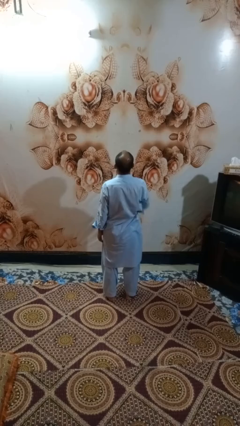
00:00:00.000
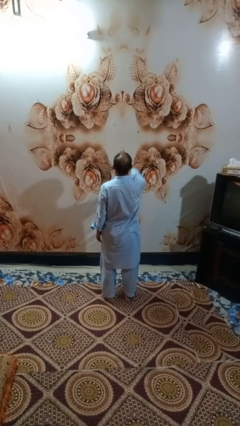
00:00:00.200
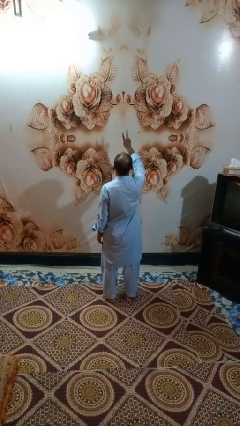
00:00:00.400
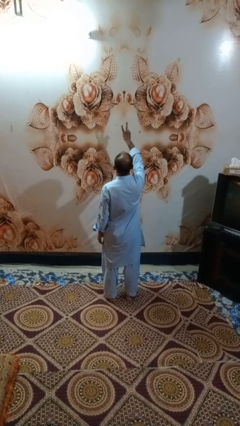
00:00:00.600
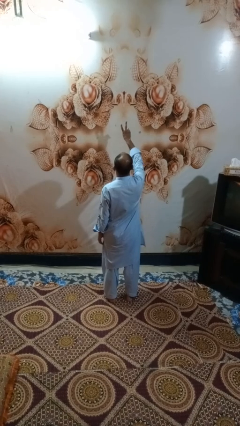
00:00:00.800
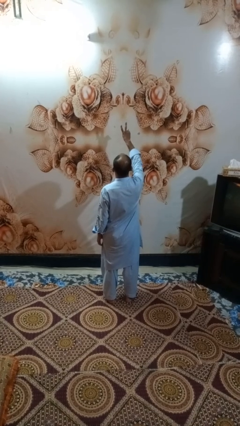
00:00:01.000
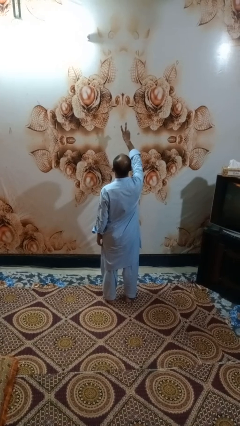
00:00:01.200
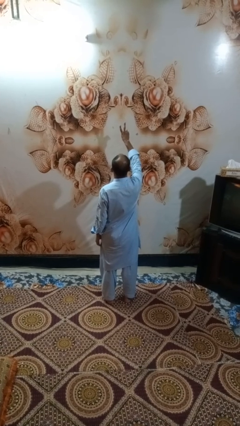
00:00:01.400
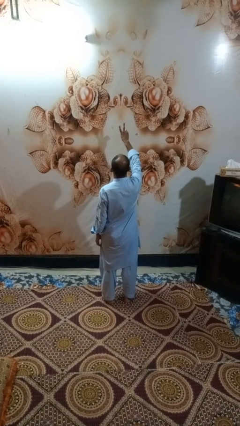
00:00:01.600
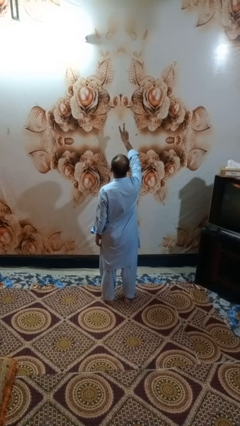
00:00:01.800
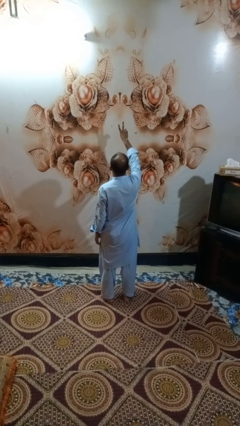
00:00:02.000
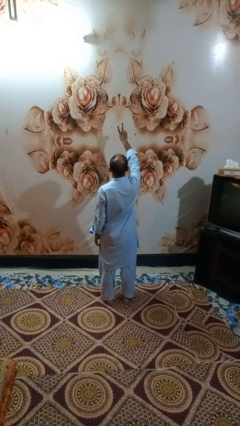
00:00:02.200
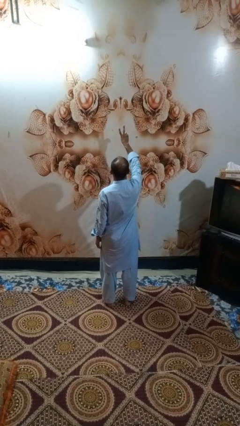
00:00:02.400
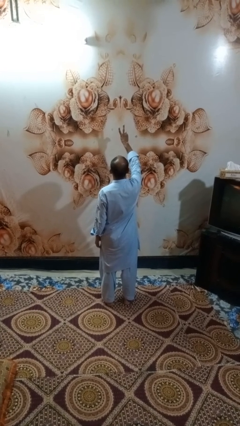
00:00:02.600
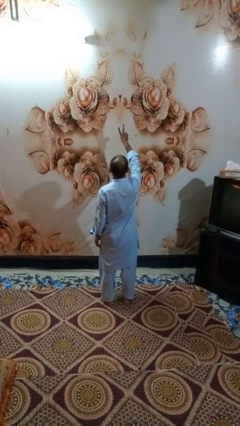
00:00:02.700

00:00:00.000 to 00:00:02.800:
person gestures peace

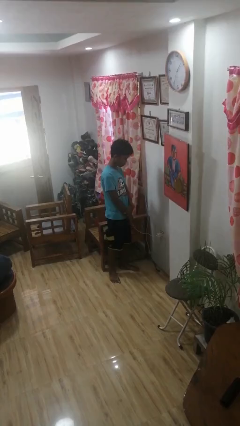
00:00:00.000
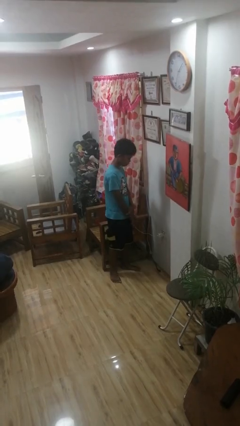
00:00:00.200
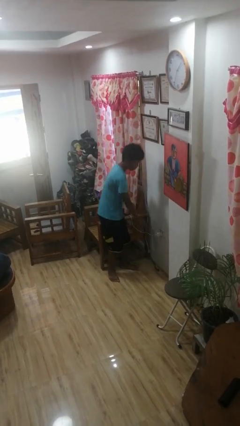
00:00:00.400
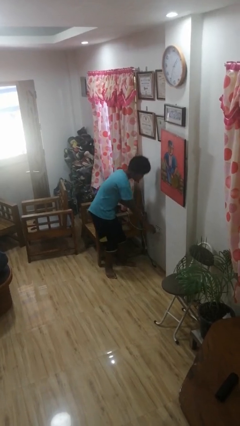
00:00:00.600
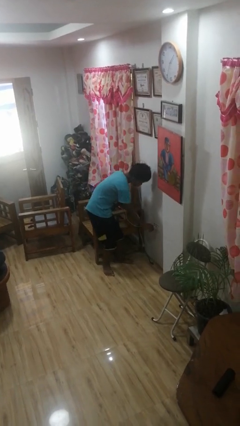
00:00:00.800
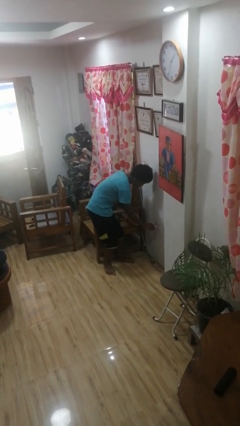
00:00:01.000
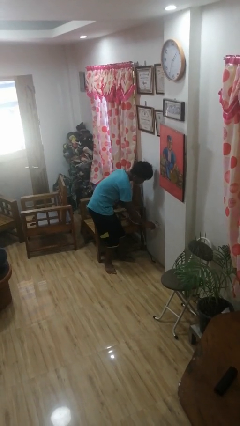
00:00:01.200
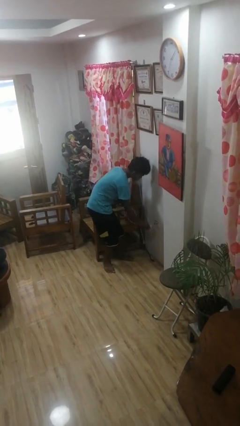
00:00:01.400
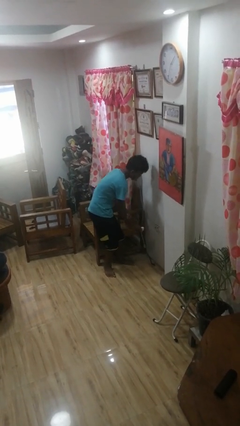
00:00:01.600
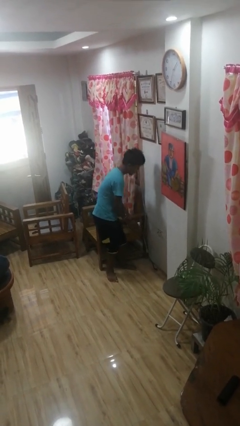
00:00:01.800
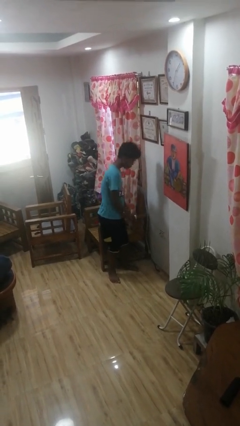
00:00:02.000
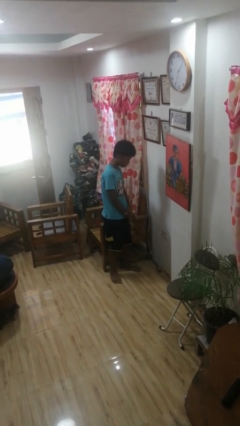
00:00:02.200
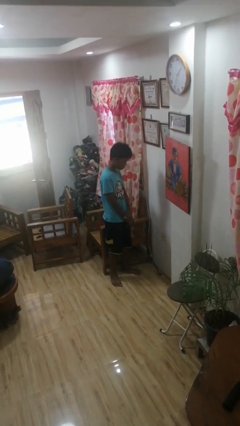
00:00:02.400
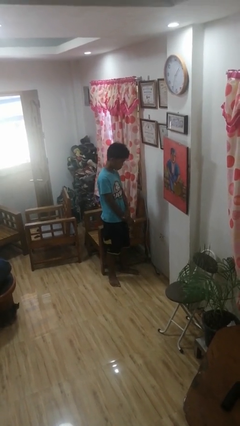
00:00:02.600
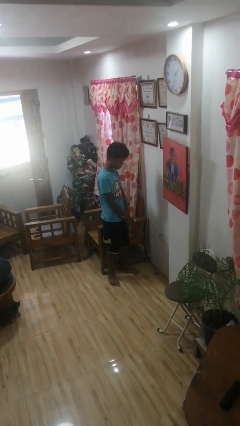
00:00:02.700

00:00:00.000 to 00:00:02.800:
person unplugs from electrical socket

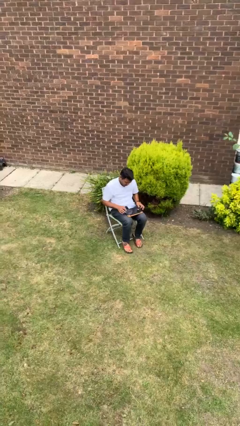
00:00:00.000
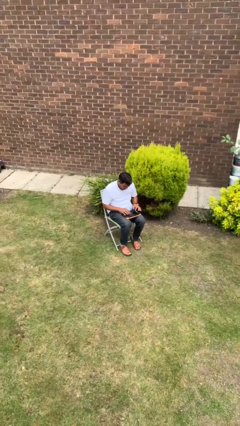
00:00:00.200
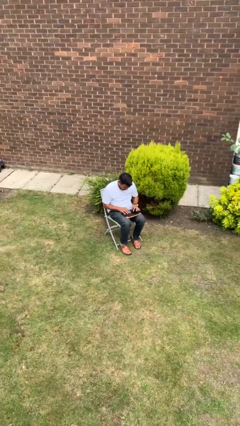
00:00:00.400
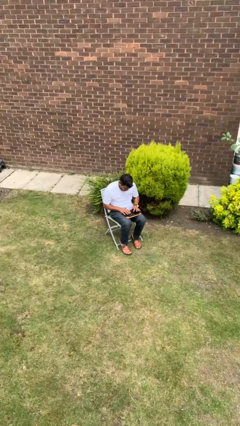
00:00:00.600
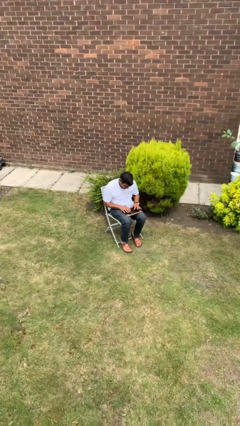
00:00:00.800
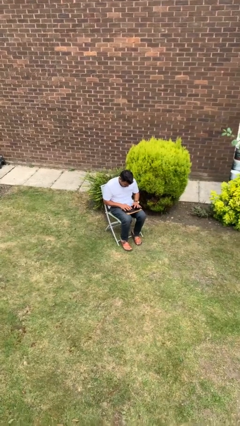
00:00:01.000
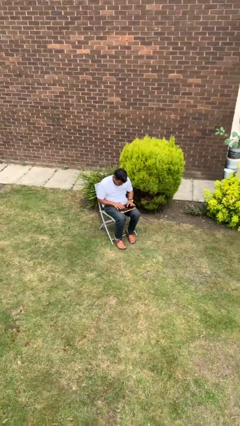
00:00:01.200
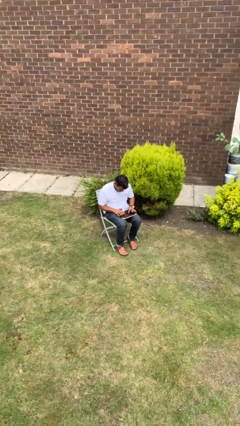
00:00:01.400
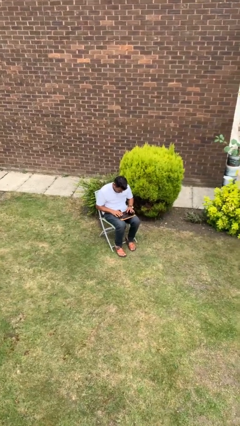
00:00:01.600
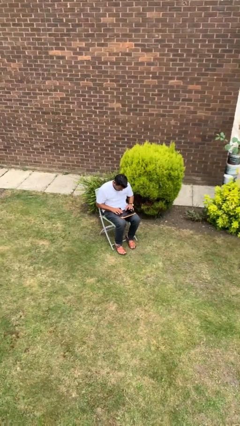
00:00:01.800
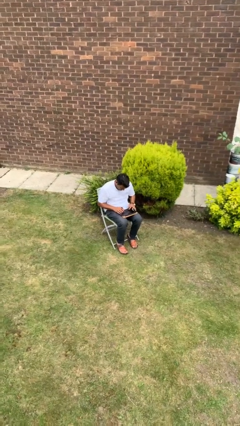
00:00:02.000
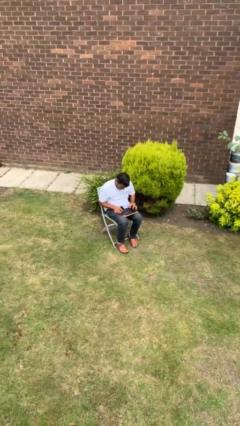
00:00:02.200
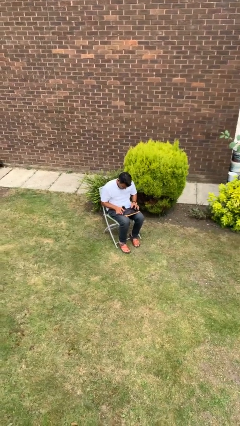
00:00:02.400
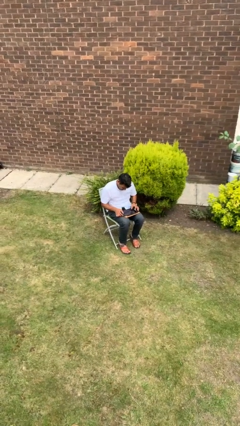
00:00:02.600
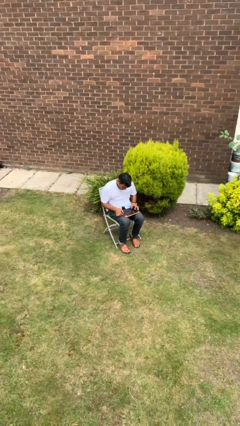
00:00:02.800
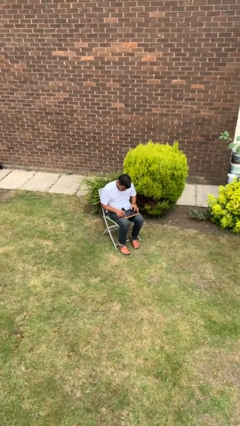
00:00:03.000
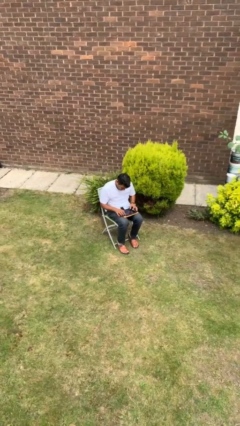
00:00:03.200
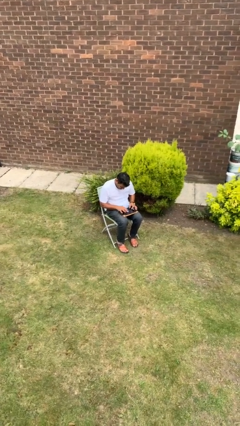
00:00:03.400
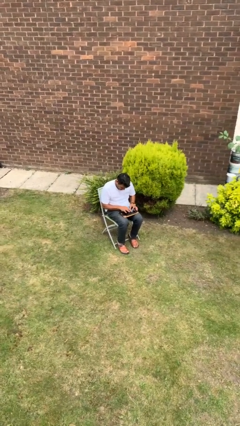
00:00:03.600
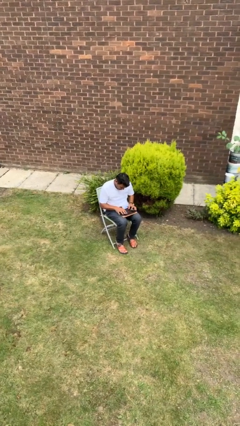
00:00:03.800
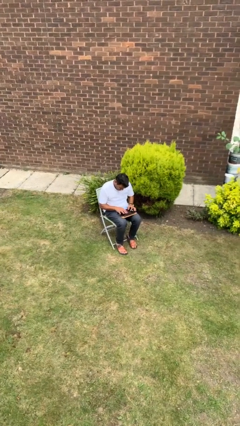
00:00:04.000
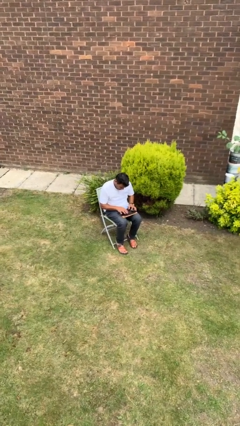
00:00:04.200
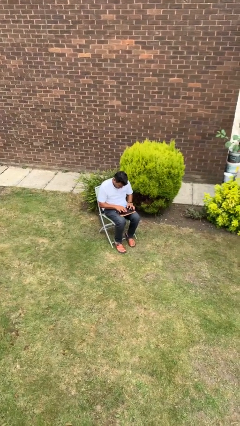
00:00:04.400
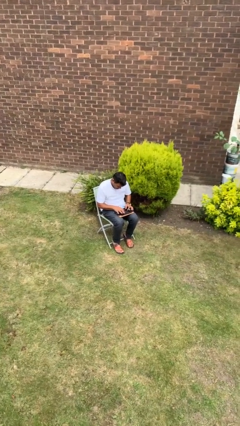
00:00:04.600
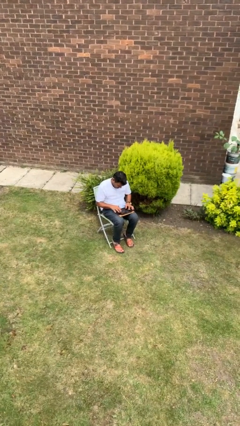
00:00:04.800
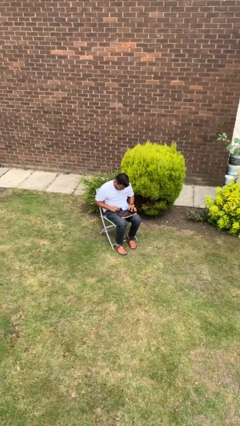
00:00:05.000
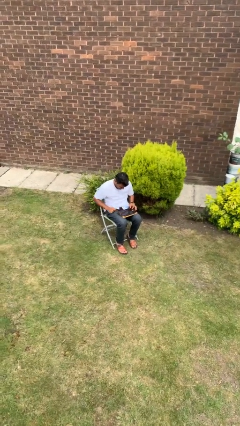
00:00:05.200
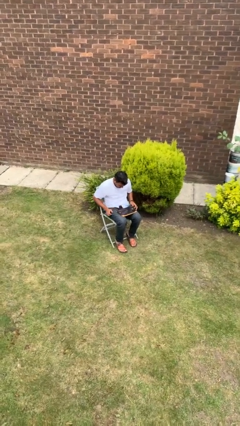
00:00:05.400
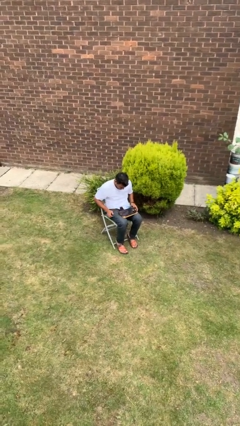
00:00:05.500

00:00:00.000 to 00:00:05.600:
person interacts with tablet

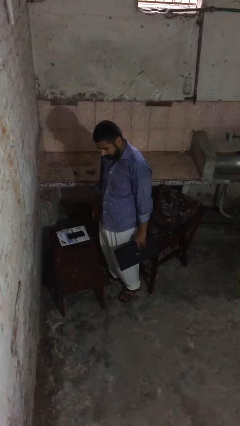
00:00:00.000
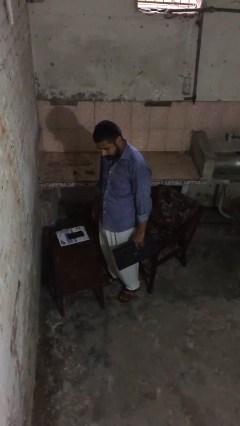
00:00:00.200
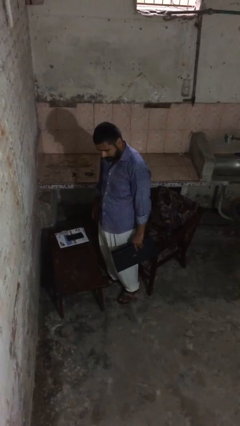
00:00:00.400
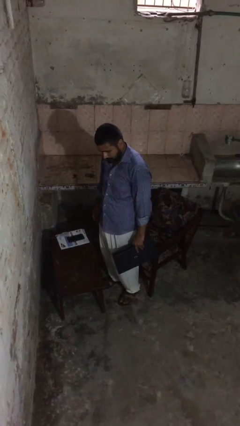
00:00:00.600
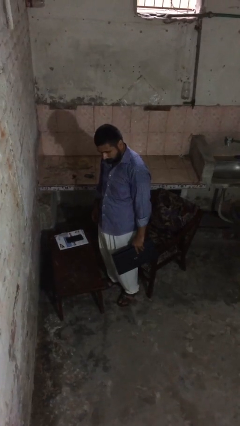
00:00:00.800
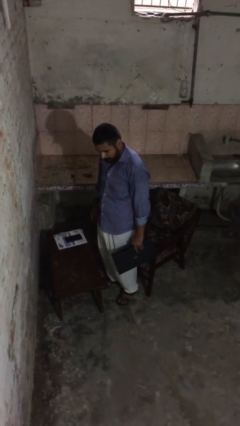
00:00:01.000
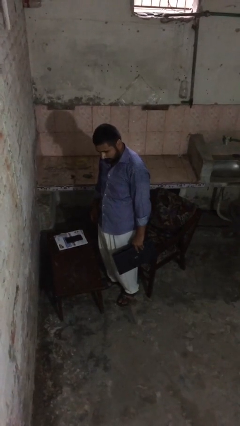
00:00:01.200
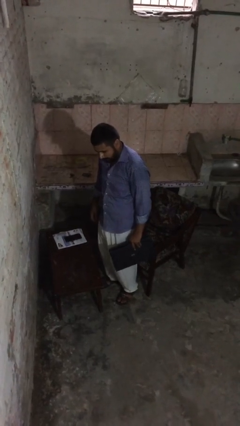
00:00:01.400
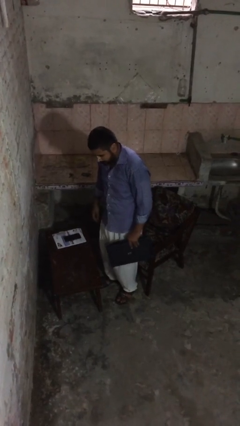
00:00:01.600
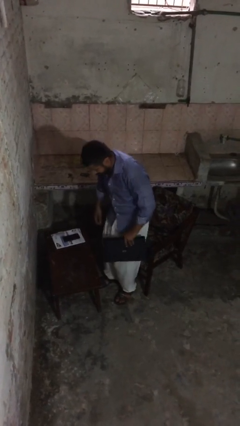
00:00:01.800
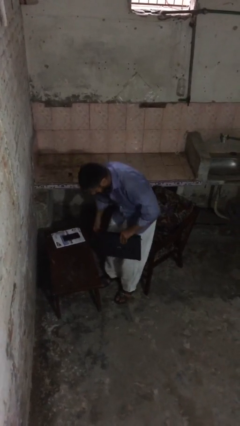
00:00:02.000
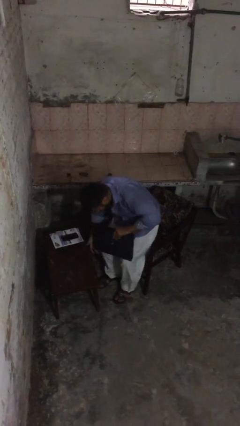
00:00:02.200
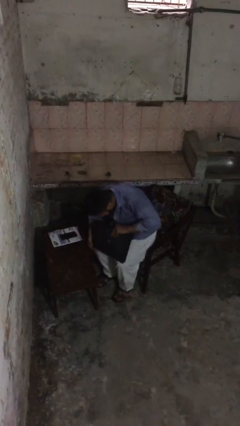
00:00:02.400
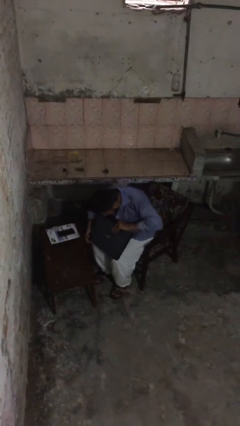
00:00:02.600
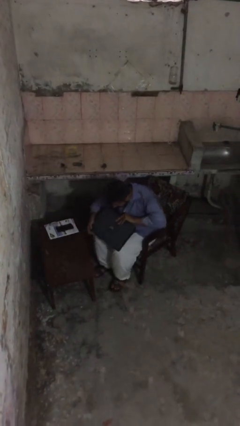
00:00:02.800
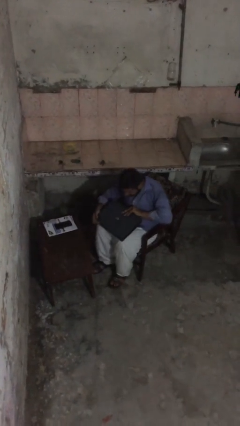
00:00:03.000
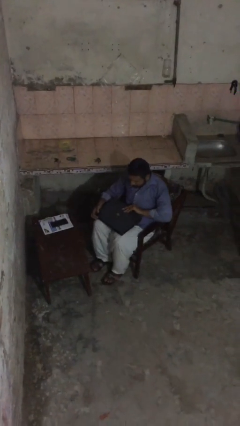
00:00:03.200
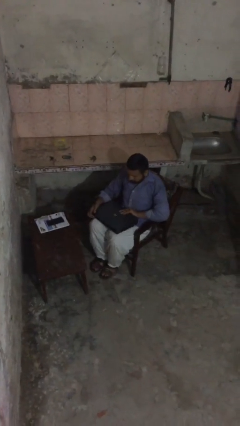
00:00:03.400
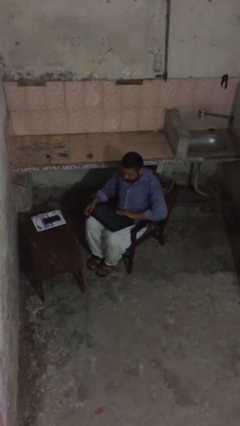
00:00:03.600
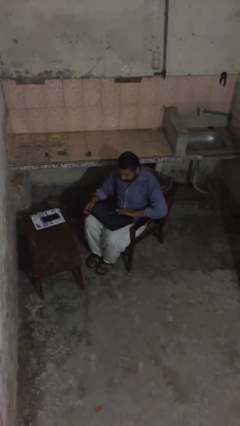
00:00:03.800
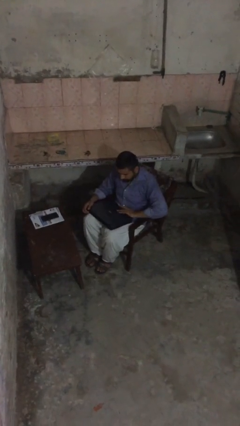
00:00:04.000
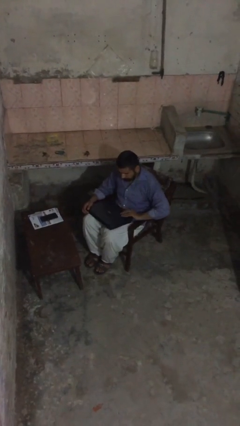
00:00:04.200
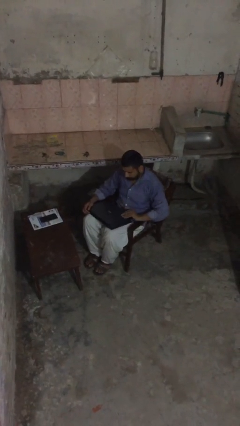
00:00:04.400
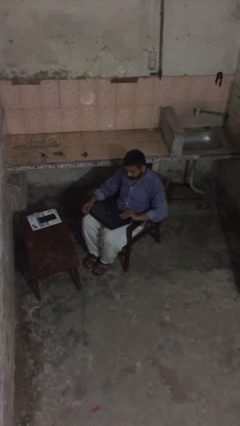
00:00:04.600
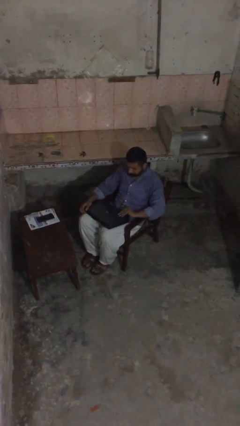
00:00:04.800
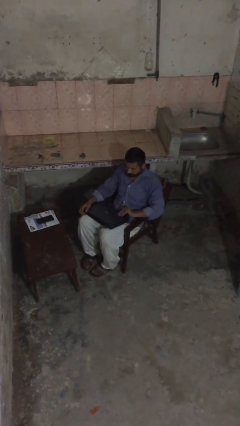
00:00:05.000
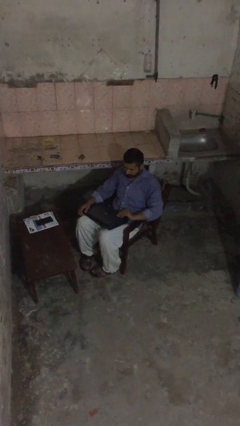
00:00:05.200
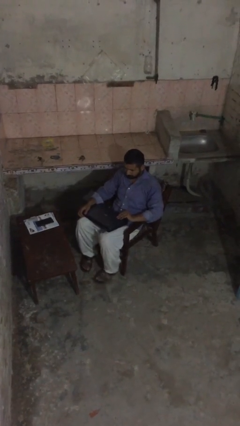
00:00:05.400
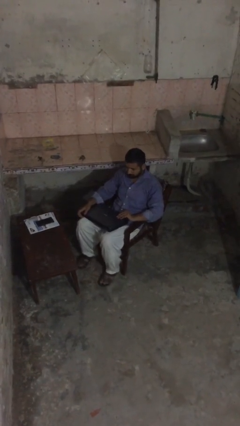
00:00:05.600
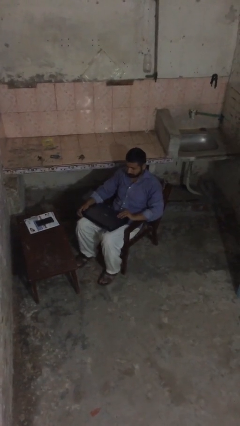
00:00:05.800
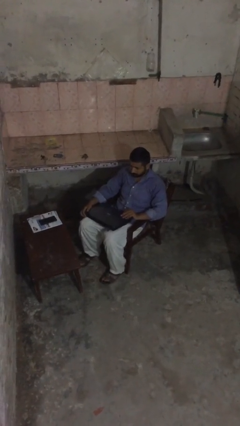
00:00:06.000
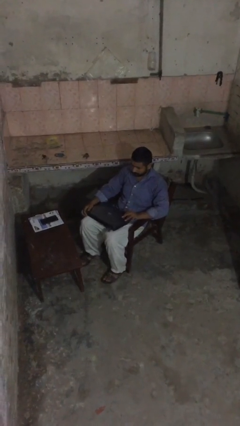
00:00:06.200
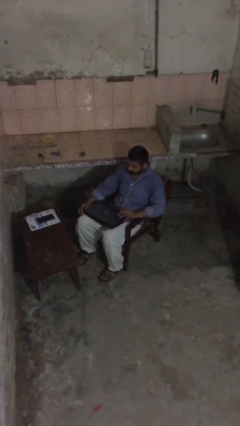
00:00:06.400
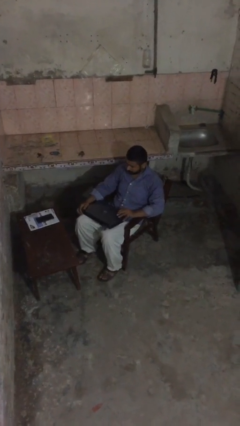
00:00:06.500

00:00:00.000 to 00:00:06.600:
person sits down

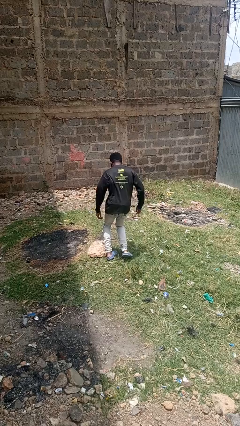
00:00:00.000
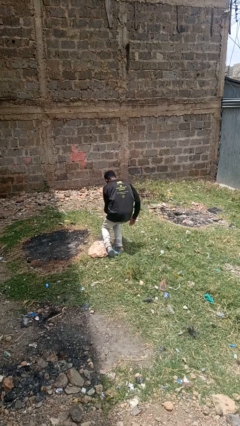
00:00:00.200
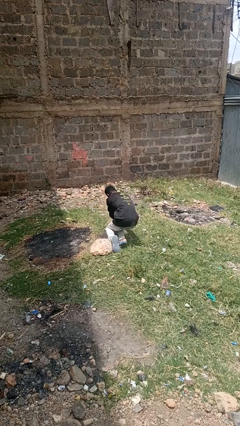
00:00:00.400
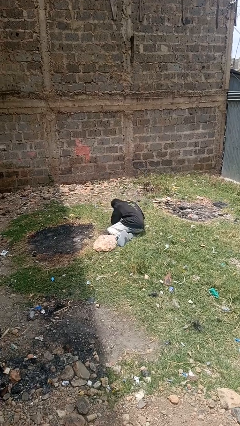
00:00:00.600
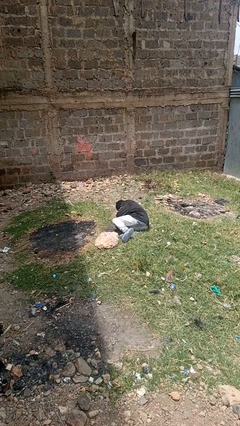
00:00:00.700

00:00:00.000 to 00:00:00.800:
person trips on object on floor
